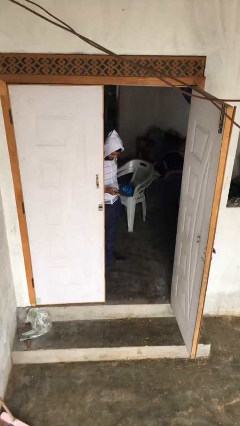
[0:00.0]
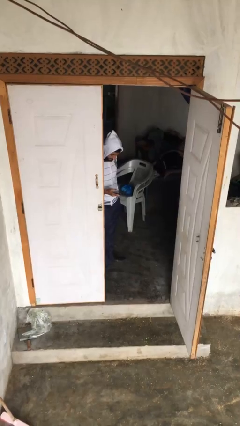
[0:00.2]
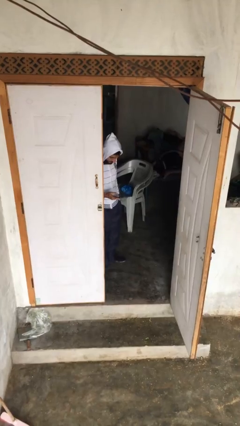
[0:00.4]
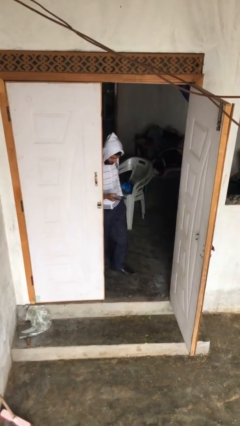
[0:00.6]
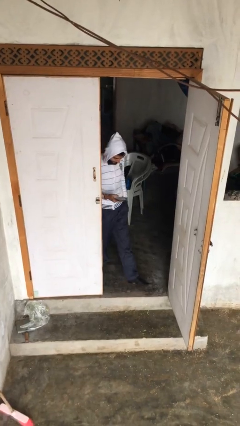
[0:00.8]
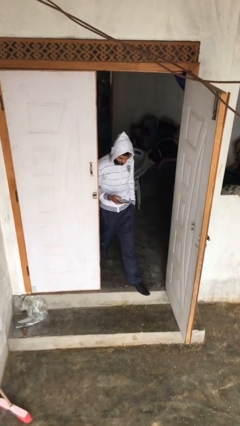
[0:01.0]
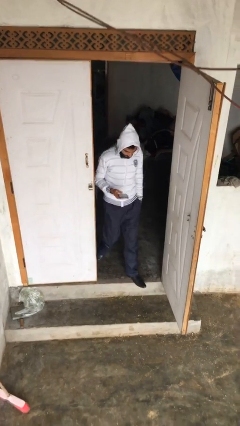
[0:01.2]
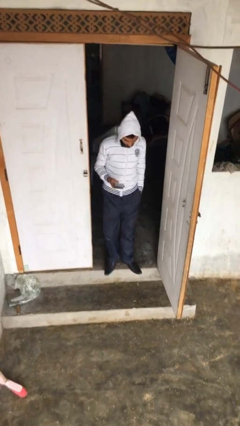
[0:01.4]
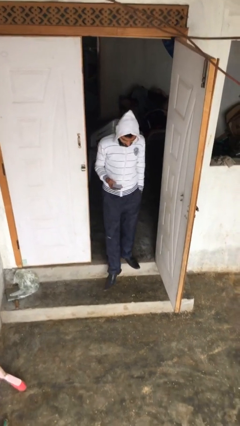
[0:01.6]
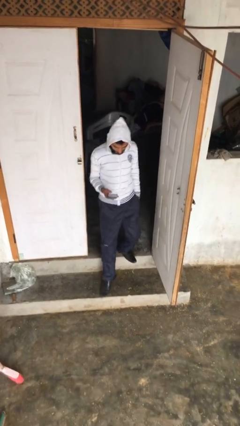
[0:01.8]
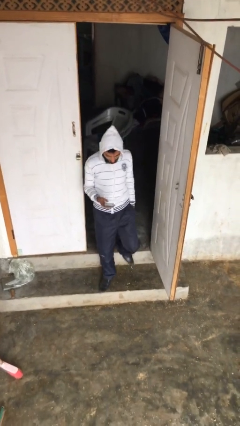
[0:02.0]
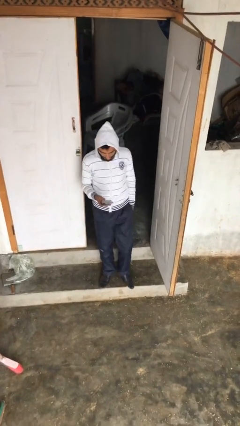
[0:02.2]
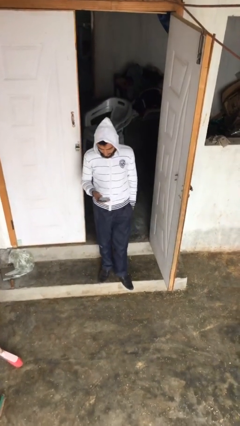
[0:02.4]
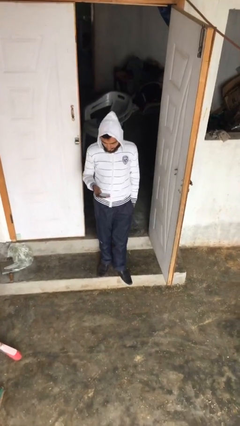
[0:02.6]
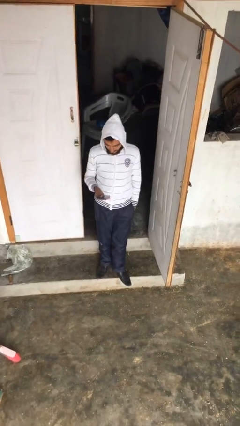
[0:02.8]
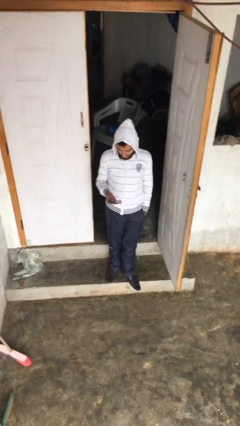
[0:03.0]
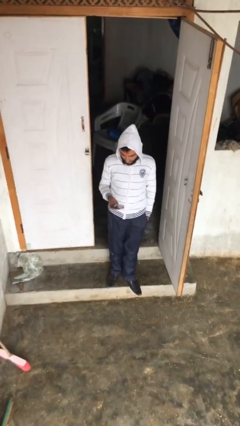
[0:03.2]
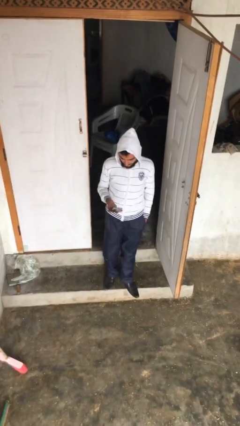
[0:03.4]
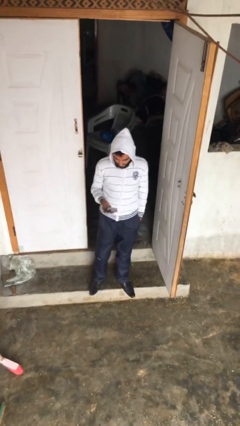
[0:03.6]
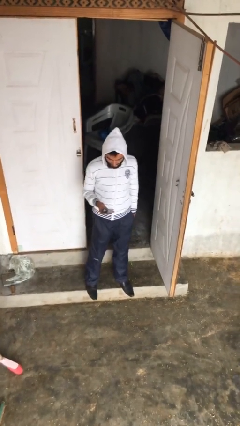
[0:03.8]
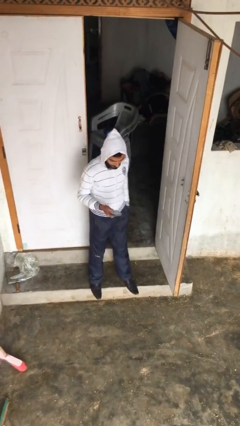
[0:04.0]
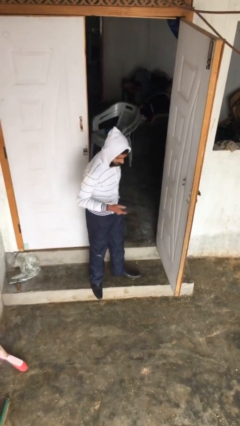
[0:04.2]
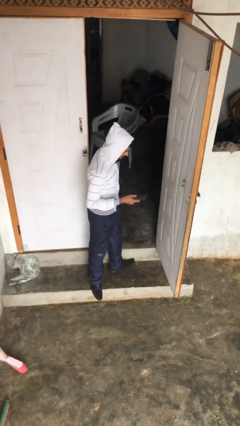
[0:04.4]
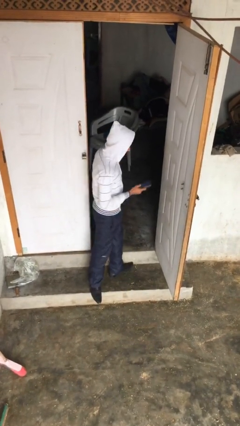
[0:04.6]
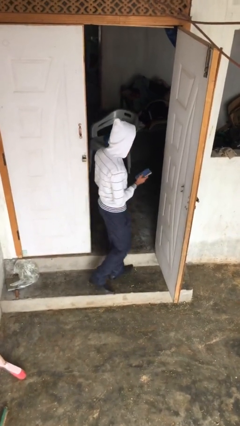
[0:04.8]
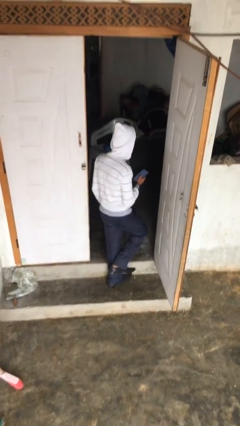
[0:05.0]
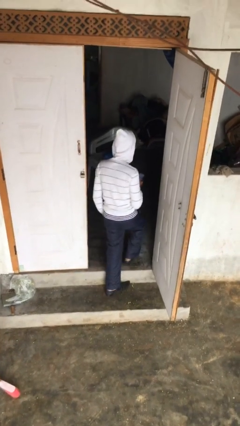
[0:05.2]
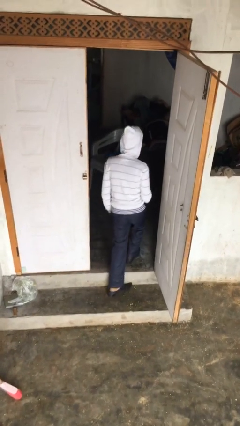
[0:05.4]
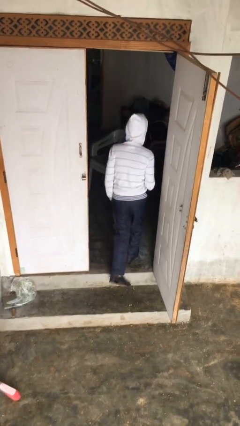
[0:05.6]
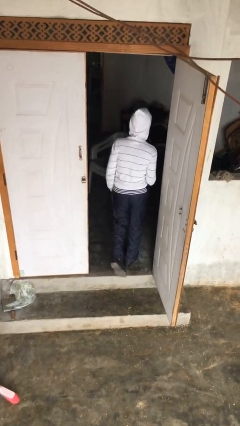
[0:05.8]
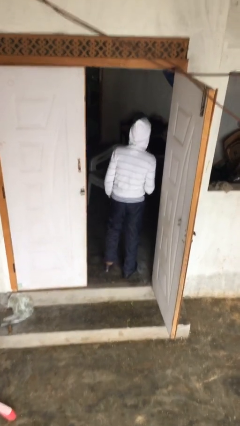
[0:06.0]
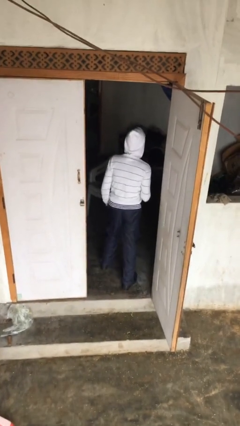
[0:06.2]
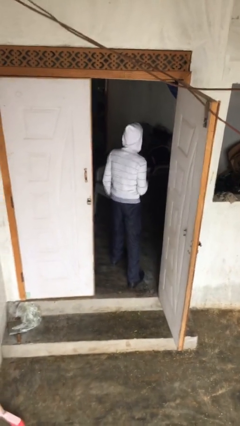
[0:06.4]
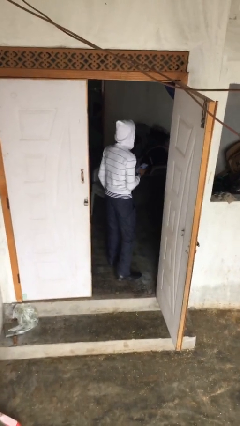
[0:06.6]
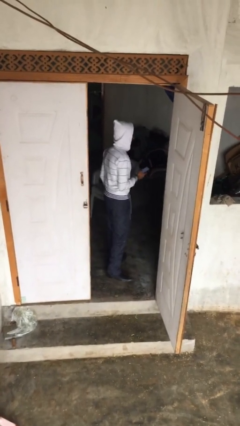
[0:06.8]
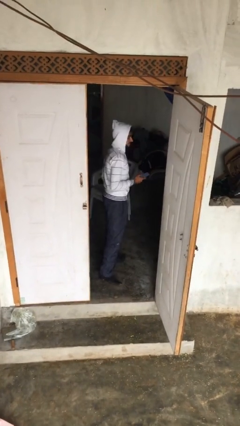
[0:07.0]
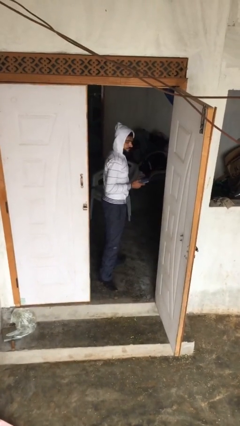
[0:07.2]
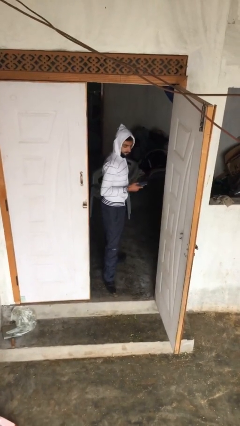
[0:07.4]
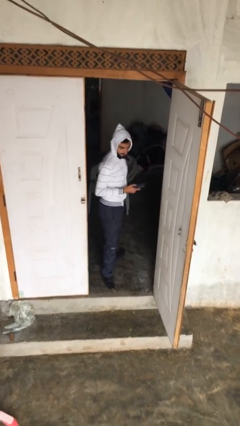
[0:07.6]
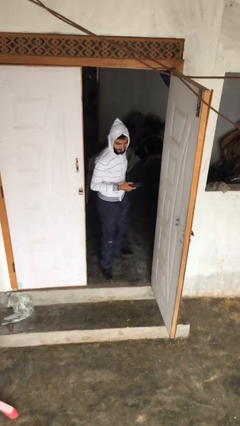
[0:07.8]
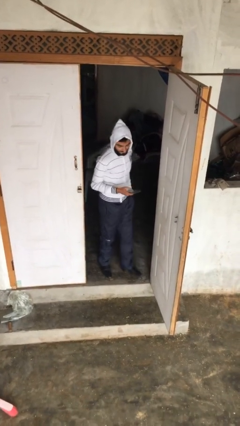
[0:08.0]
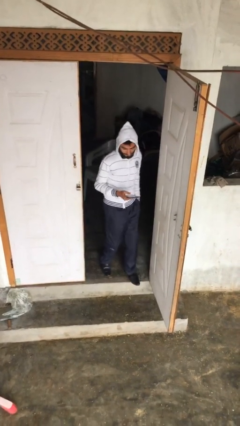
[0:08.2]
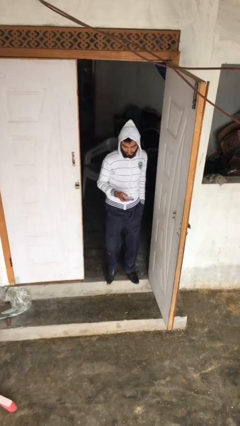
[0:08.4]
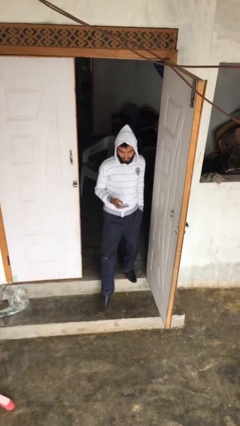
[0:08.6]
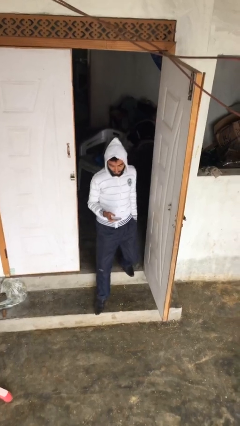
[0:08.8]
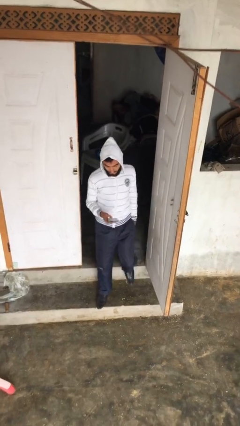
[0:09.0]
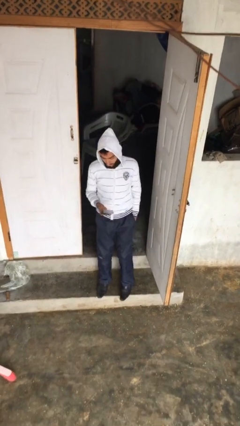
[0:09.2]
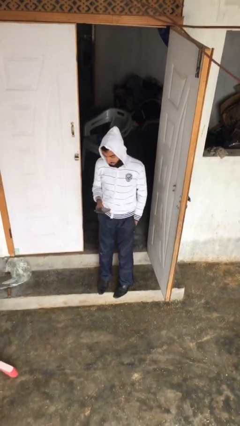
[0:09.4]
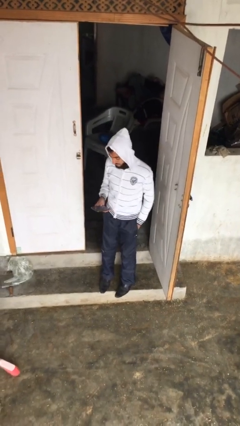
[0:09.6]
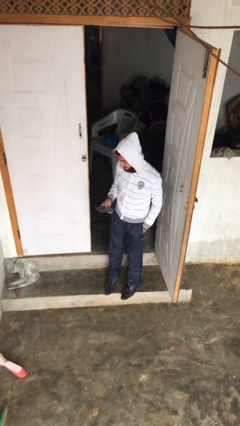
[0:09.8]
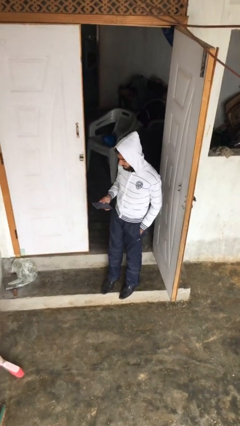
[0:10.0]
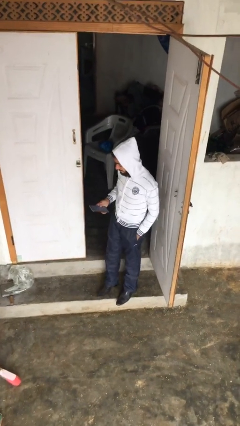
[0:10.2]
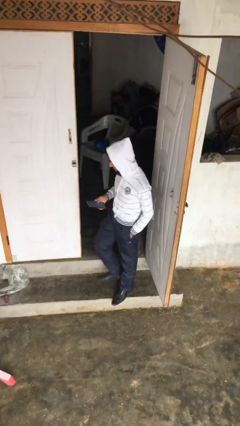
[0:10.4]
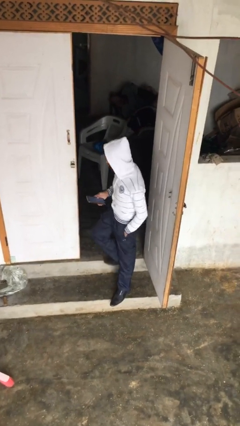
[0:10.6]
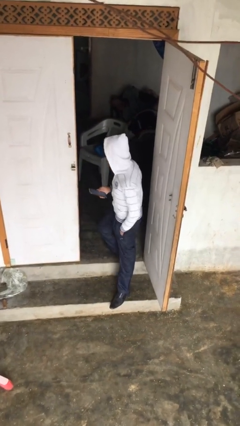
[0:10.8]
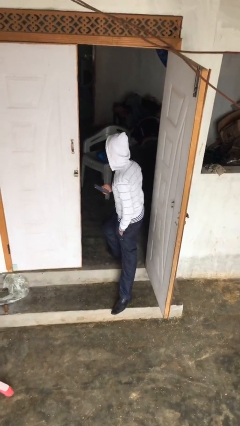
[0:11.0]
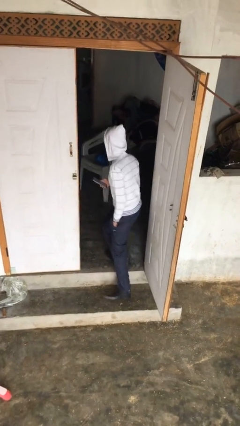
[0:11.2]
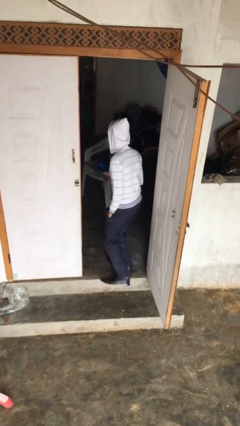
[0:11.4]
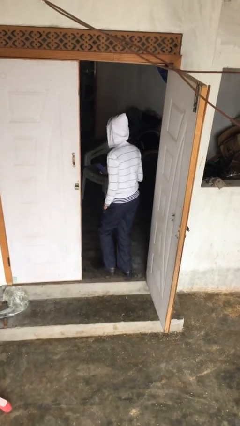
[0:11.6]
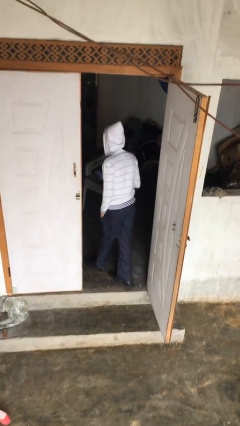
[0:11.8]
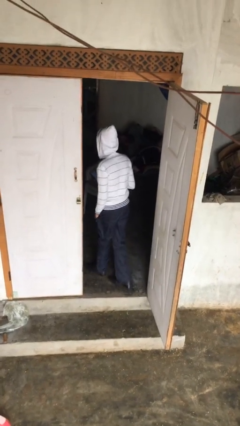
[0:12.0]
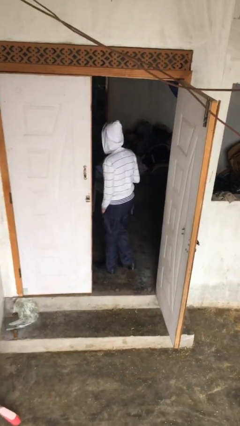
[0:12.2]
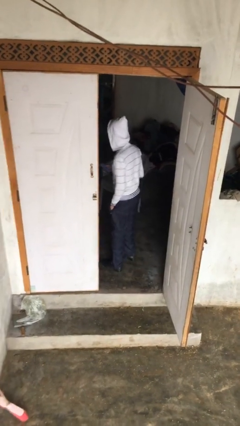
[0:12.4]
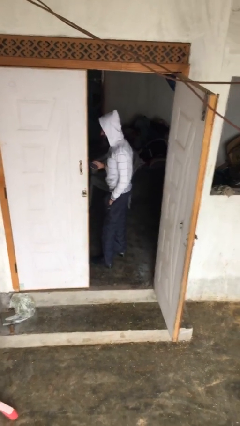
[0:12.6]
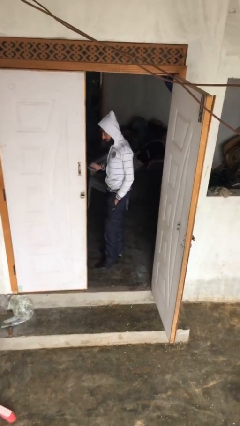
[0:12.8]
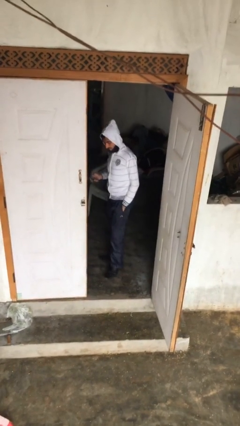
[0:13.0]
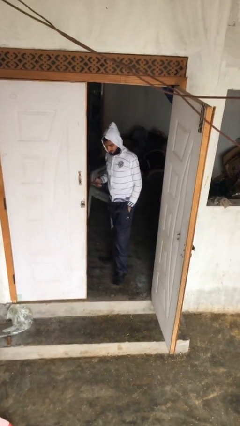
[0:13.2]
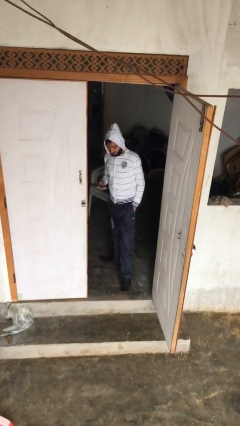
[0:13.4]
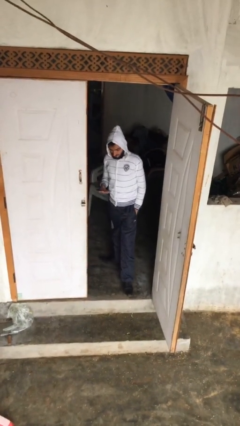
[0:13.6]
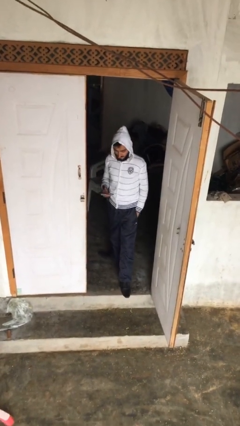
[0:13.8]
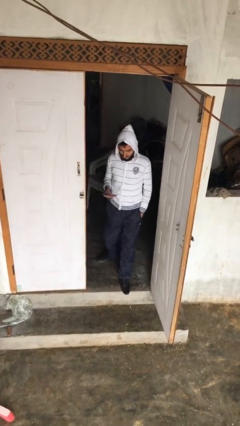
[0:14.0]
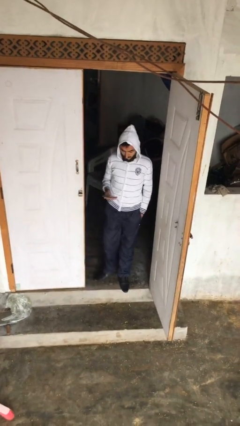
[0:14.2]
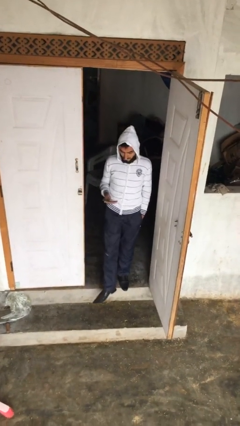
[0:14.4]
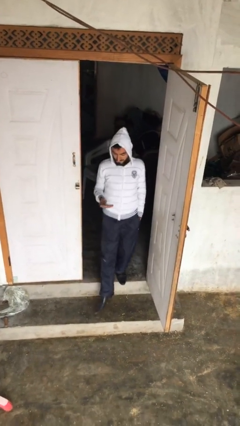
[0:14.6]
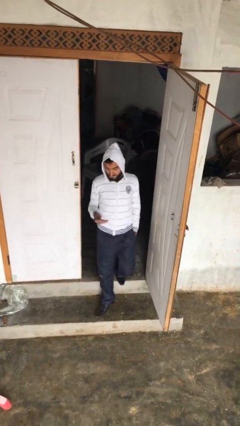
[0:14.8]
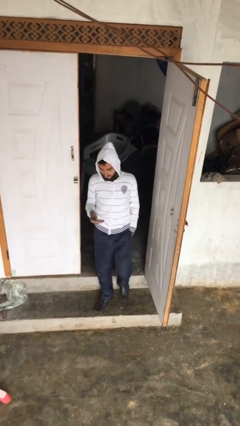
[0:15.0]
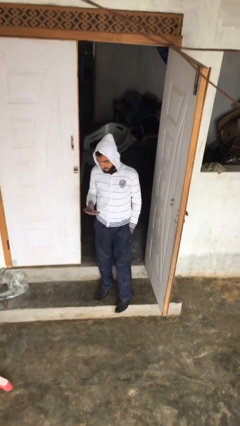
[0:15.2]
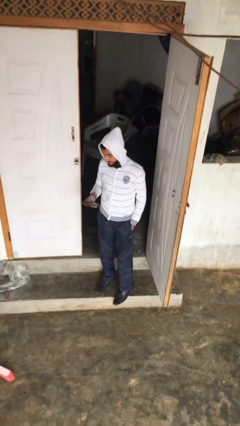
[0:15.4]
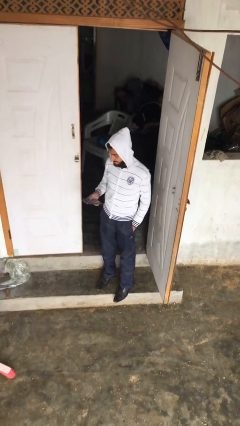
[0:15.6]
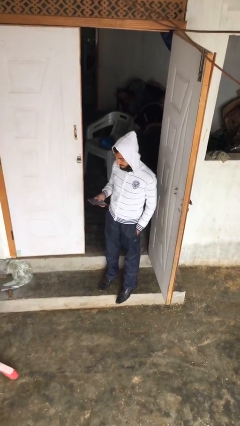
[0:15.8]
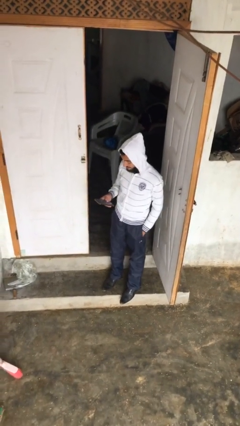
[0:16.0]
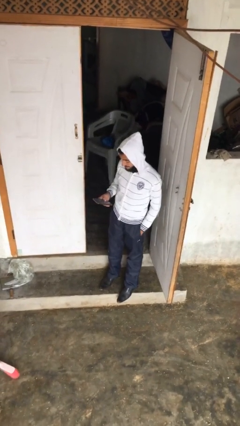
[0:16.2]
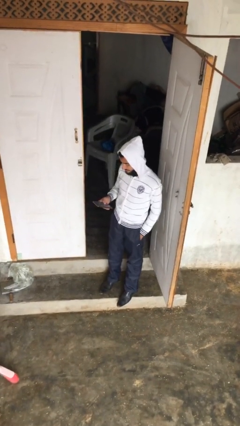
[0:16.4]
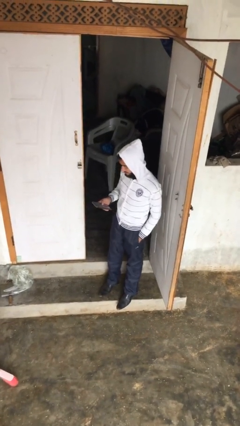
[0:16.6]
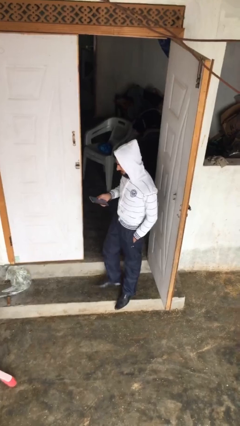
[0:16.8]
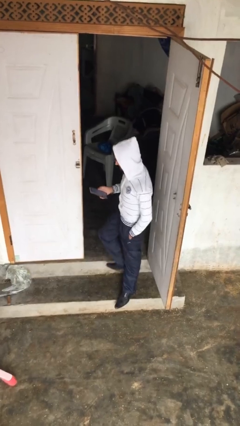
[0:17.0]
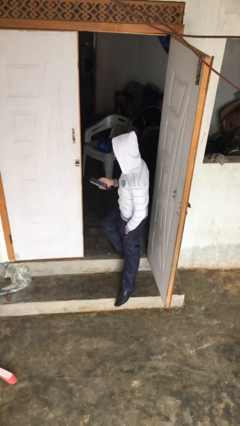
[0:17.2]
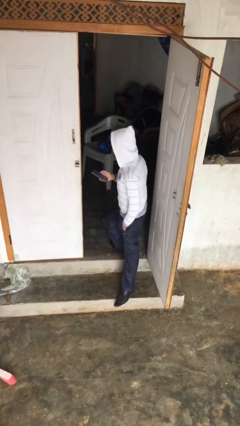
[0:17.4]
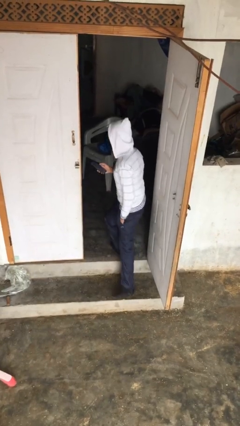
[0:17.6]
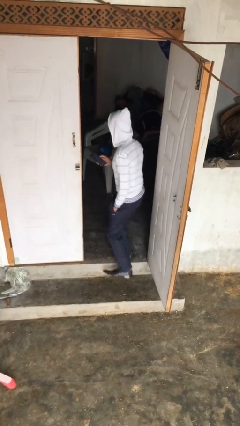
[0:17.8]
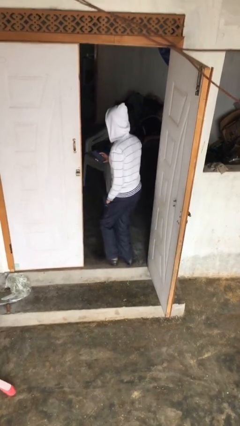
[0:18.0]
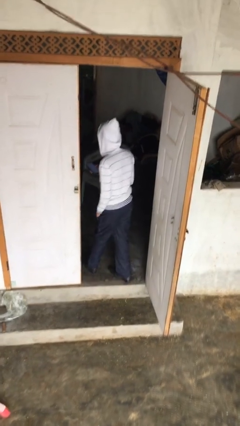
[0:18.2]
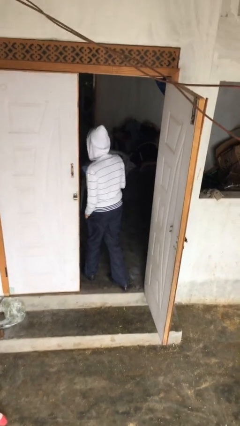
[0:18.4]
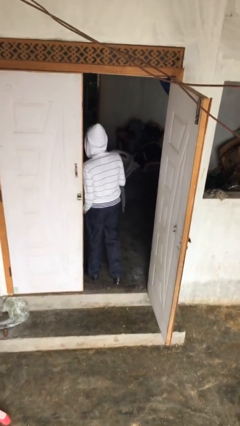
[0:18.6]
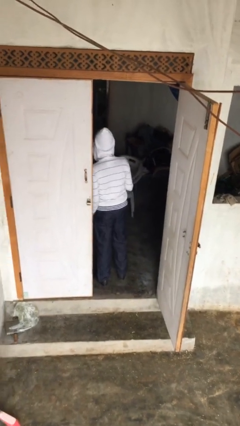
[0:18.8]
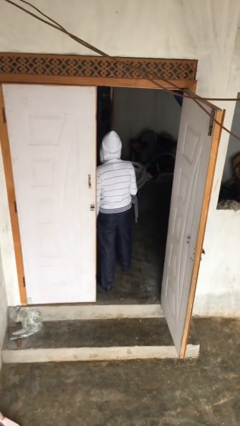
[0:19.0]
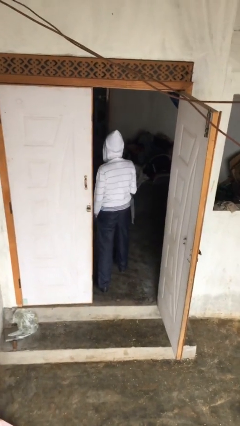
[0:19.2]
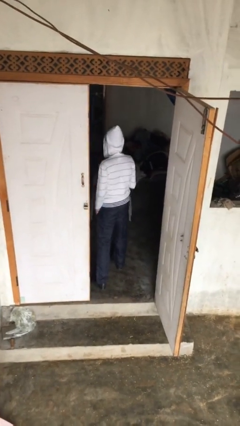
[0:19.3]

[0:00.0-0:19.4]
person texts on phone
